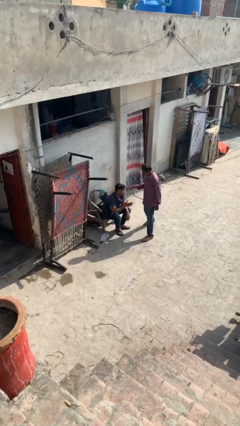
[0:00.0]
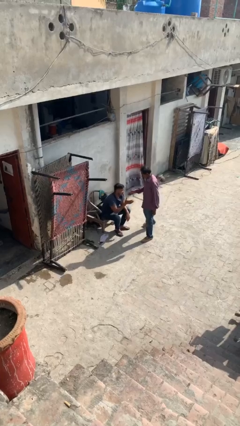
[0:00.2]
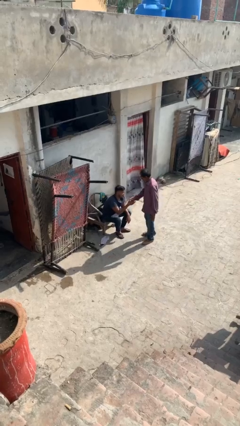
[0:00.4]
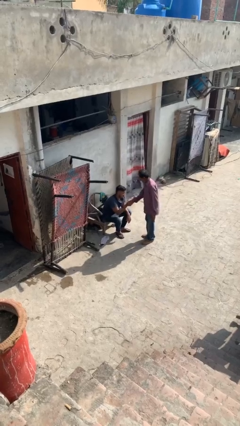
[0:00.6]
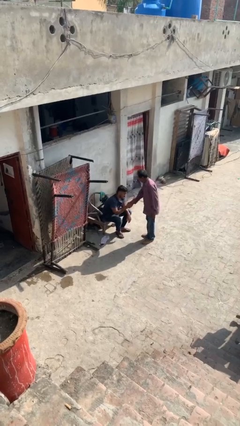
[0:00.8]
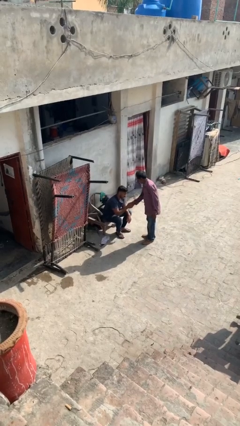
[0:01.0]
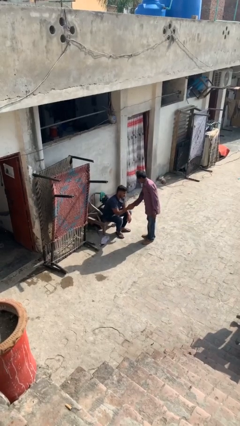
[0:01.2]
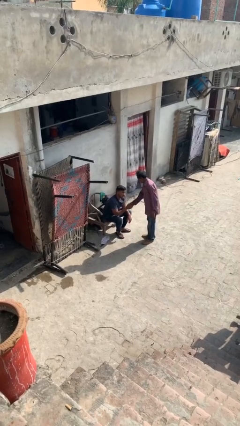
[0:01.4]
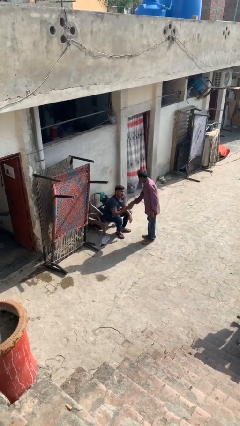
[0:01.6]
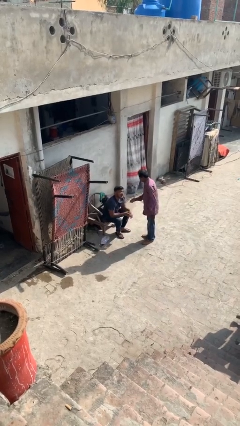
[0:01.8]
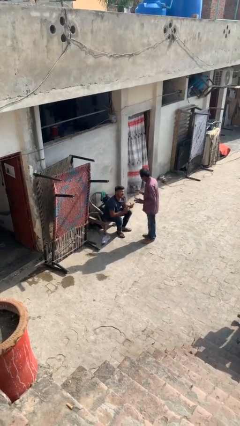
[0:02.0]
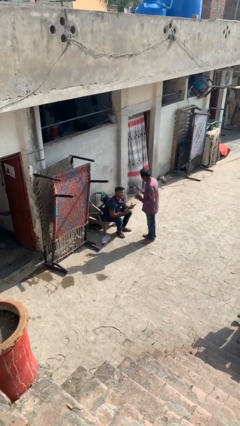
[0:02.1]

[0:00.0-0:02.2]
person shakes hand

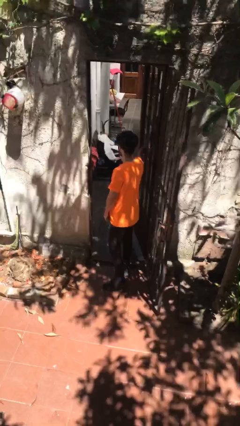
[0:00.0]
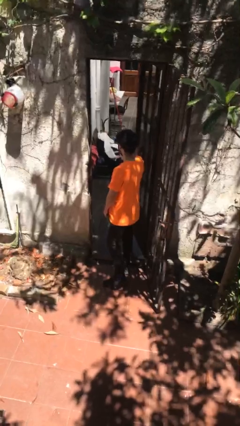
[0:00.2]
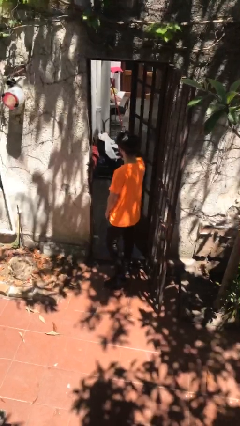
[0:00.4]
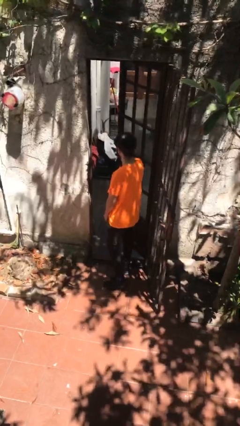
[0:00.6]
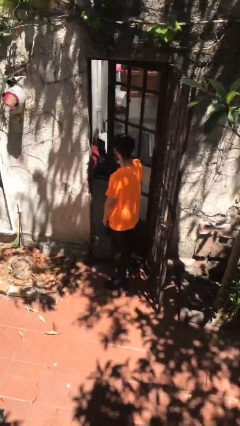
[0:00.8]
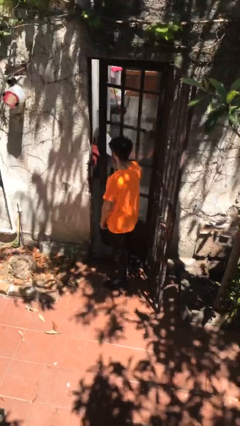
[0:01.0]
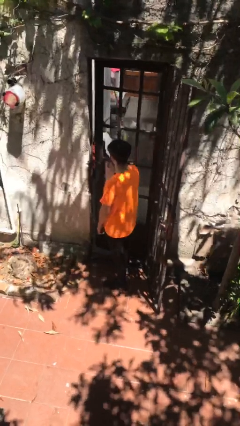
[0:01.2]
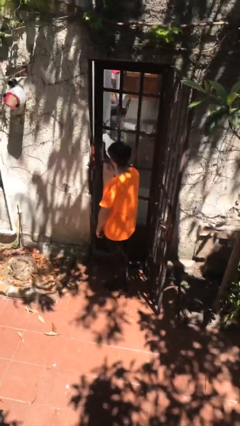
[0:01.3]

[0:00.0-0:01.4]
person closes facility door

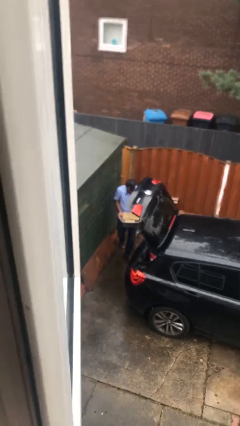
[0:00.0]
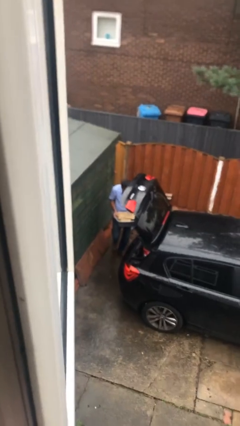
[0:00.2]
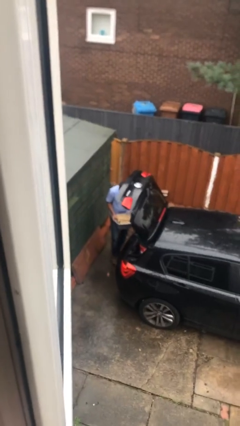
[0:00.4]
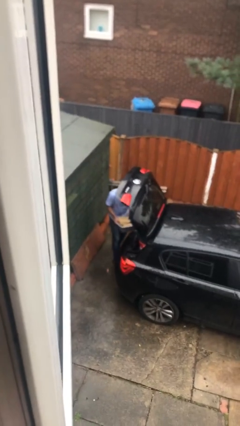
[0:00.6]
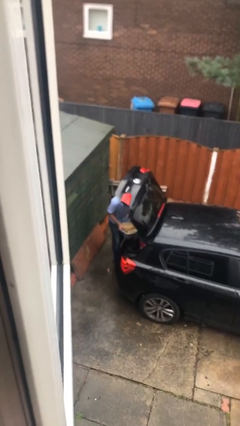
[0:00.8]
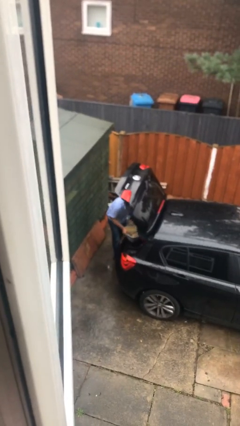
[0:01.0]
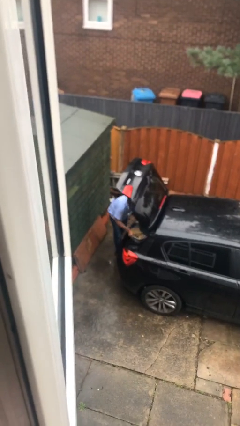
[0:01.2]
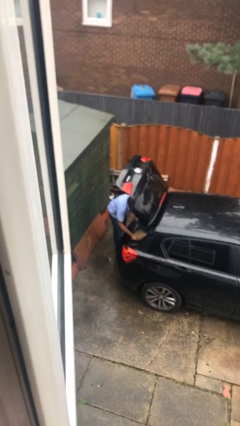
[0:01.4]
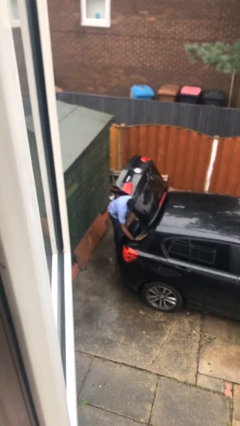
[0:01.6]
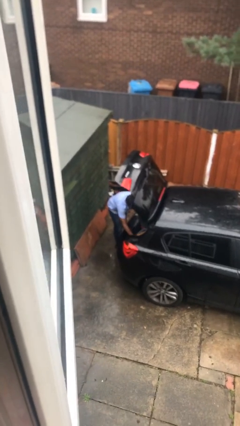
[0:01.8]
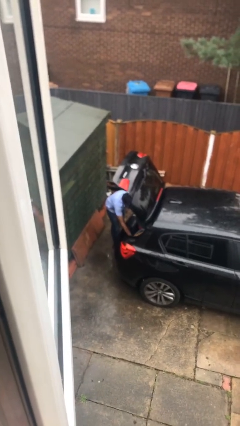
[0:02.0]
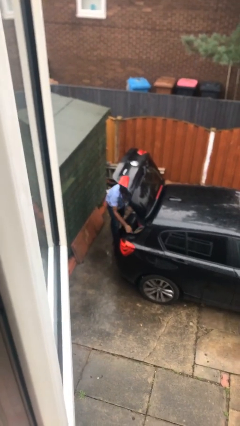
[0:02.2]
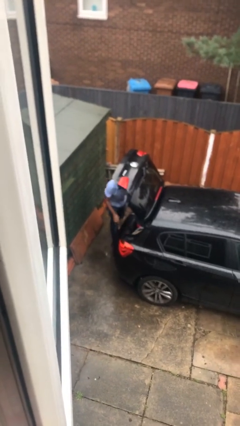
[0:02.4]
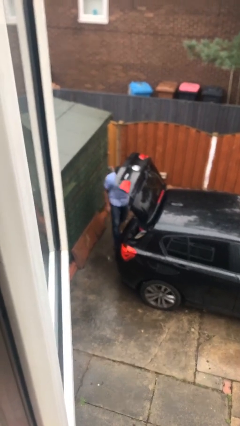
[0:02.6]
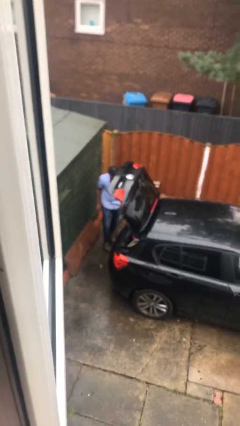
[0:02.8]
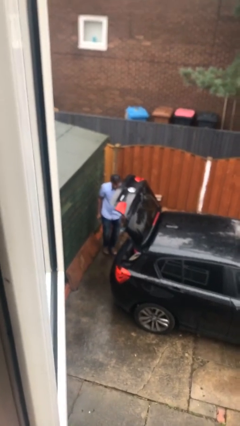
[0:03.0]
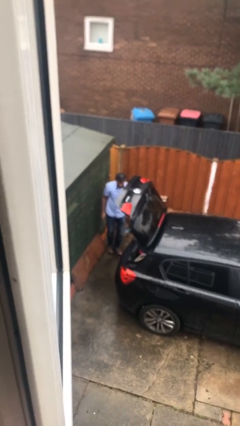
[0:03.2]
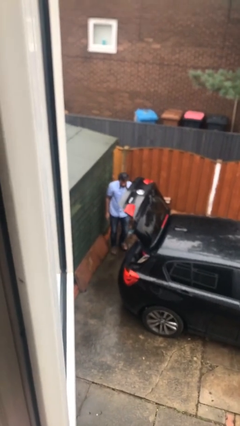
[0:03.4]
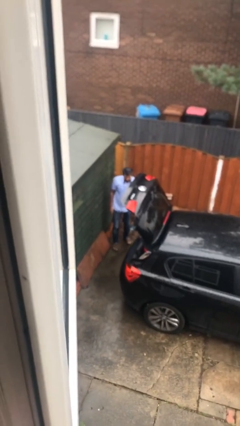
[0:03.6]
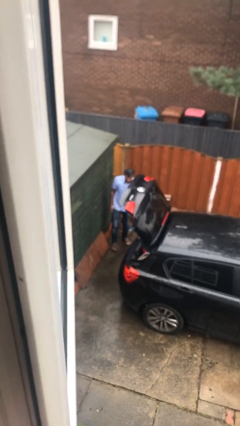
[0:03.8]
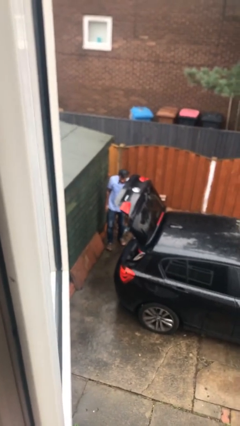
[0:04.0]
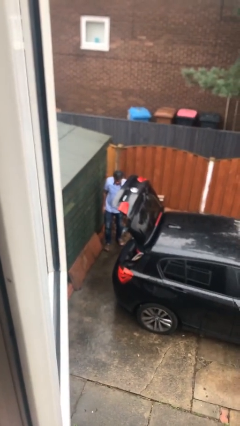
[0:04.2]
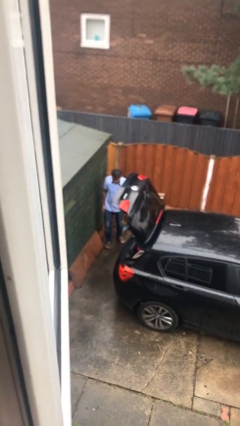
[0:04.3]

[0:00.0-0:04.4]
person loads car

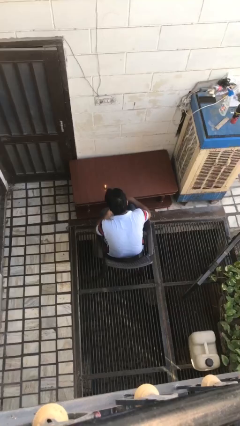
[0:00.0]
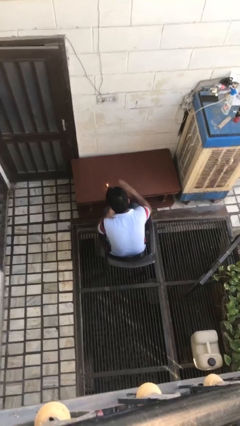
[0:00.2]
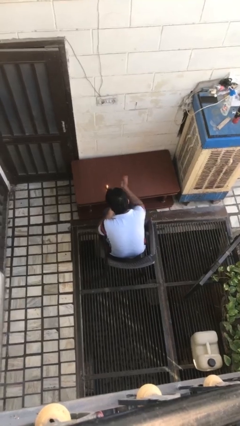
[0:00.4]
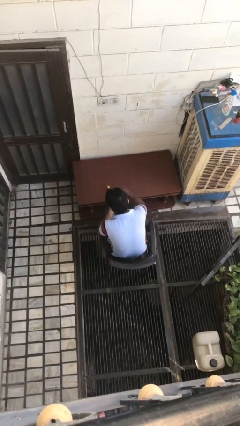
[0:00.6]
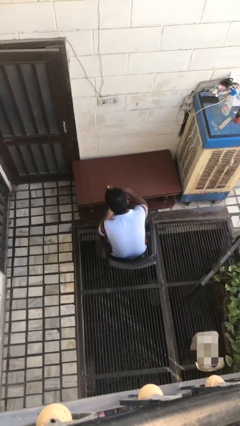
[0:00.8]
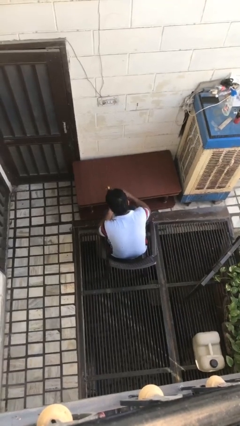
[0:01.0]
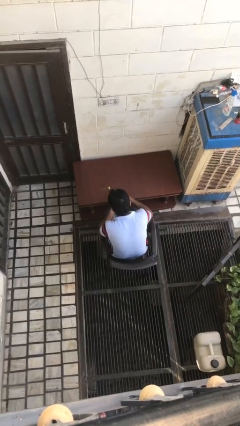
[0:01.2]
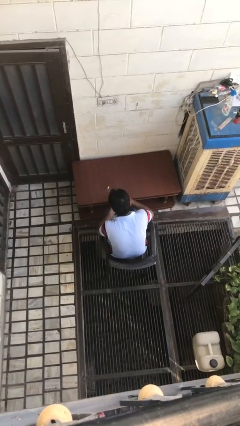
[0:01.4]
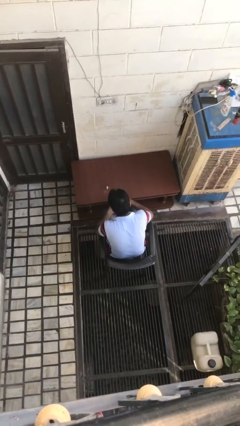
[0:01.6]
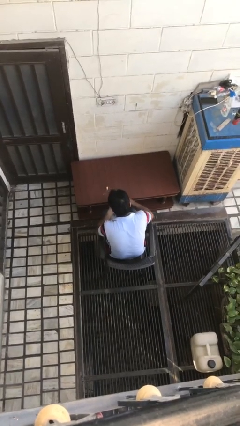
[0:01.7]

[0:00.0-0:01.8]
person extinguishes candle

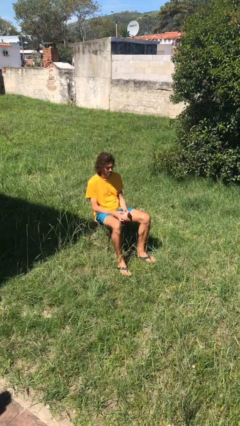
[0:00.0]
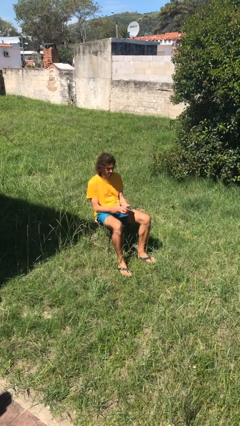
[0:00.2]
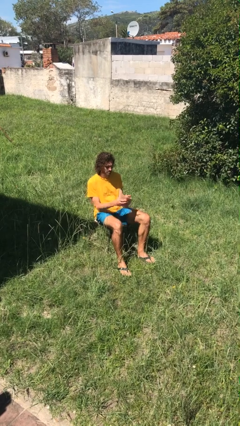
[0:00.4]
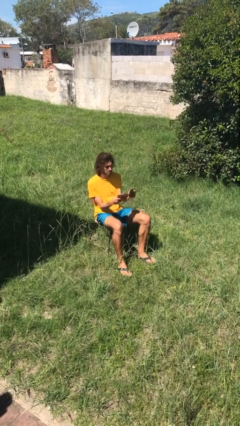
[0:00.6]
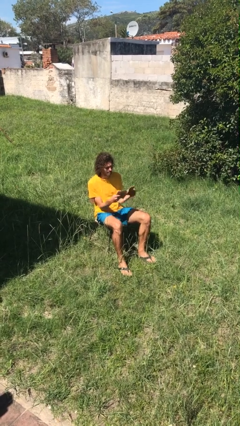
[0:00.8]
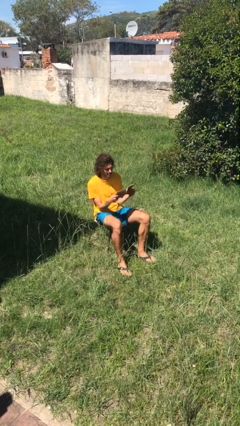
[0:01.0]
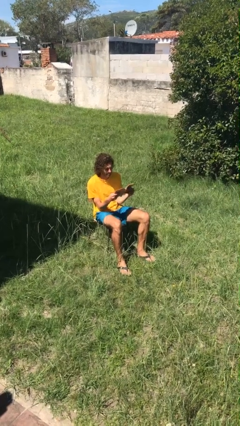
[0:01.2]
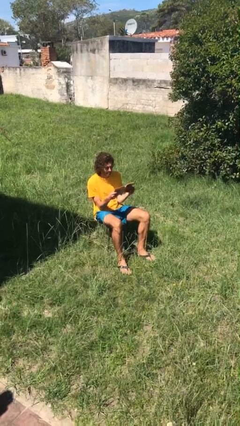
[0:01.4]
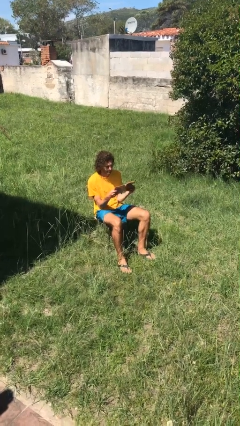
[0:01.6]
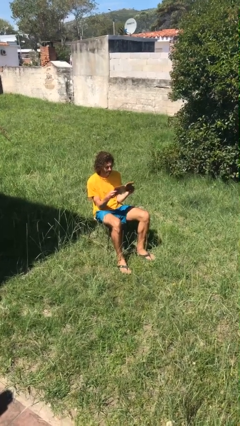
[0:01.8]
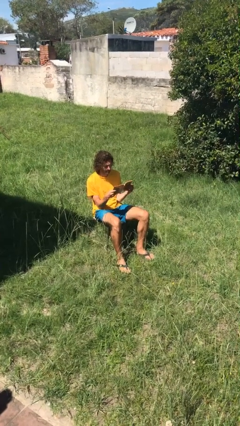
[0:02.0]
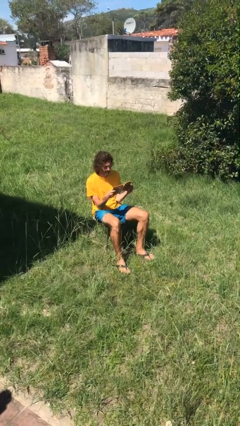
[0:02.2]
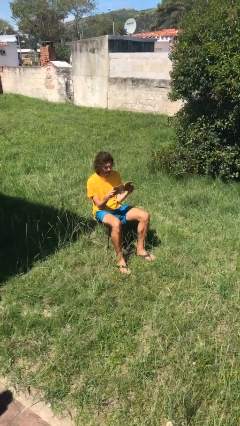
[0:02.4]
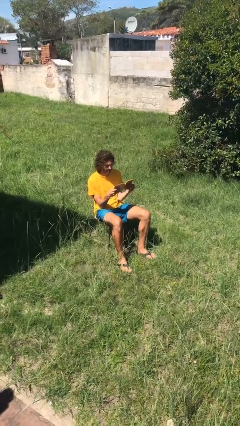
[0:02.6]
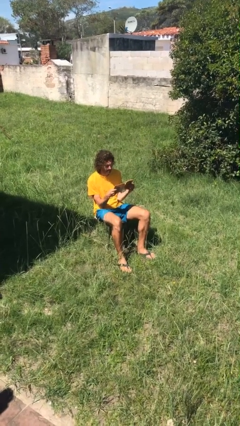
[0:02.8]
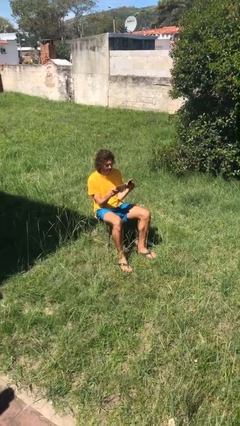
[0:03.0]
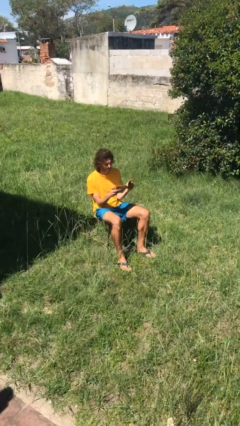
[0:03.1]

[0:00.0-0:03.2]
person reads document

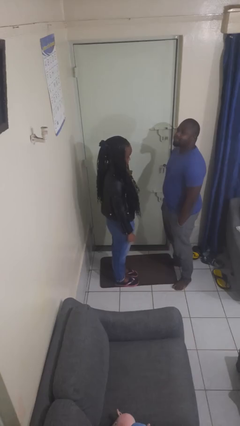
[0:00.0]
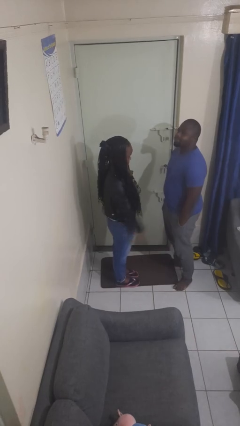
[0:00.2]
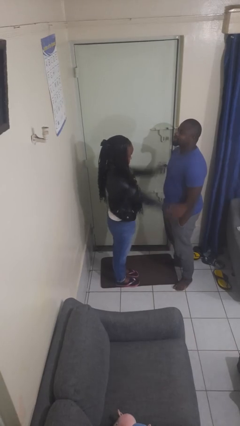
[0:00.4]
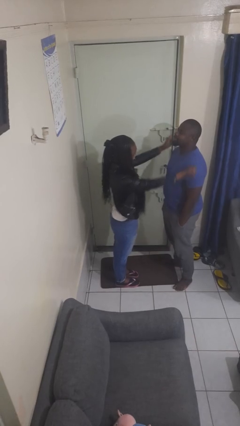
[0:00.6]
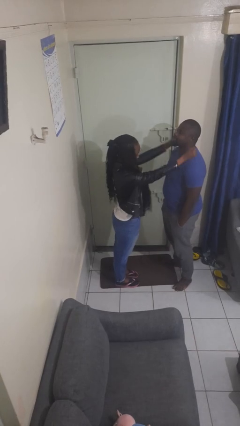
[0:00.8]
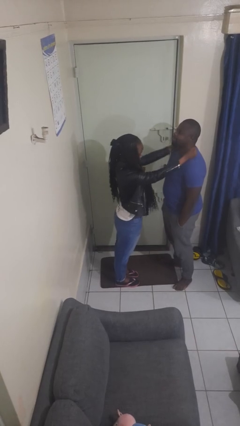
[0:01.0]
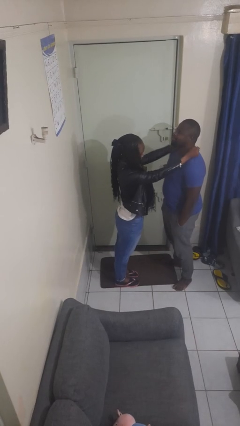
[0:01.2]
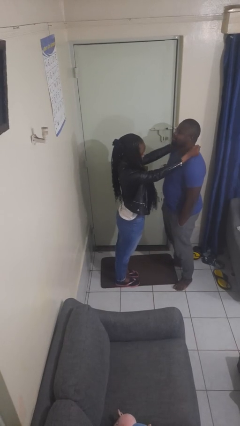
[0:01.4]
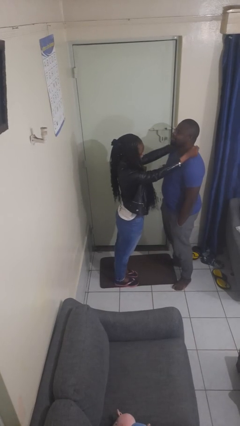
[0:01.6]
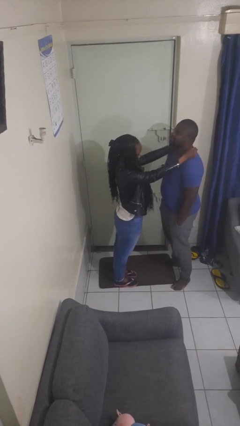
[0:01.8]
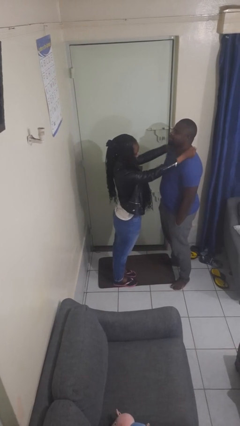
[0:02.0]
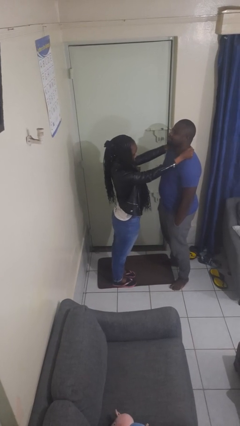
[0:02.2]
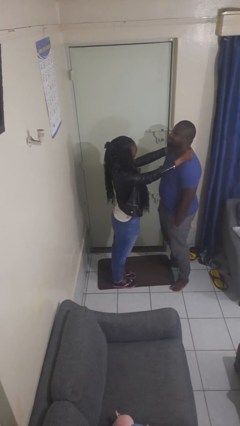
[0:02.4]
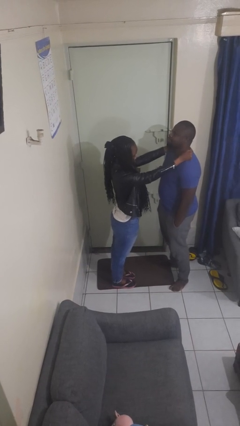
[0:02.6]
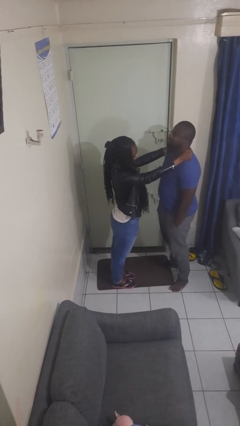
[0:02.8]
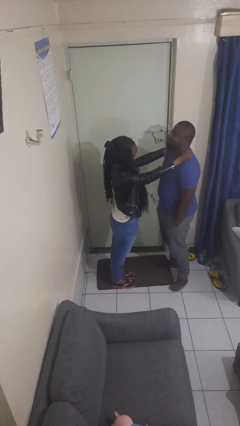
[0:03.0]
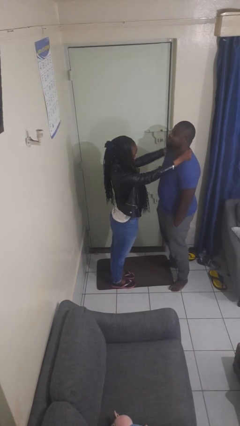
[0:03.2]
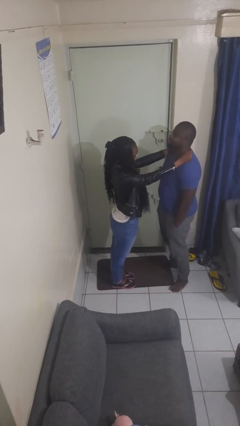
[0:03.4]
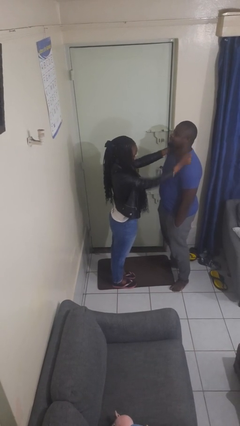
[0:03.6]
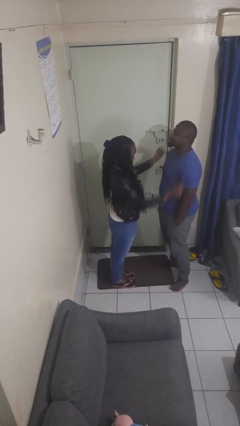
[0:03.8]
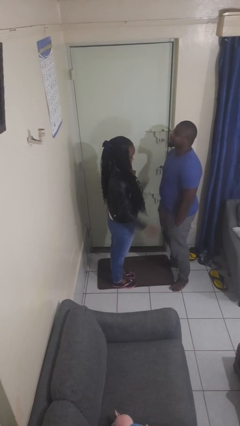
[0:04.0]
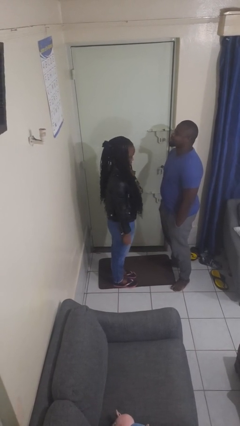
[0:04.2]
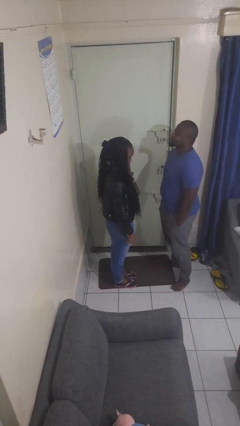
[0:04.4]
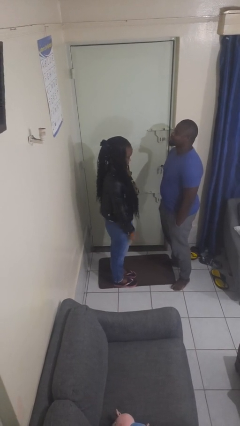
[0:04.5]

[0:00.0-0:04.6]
person pounds shoulders of person
